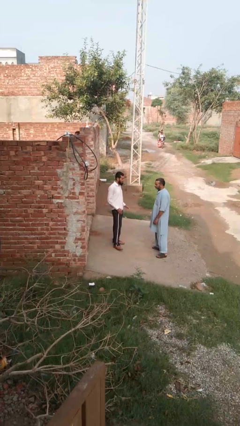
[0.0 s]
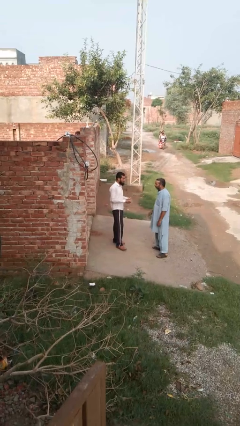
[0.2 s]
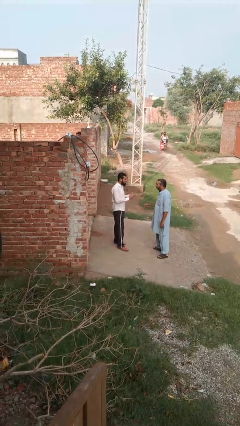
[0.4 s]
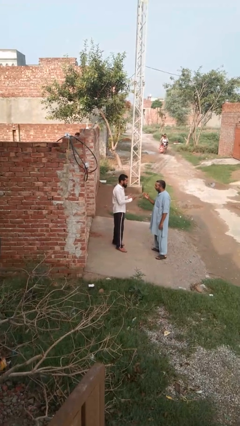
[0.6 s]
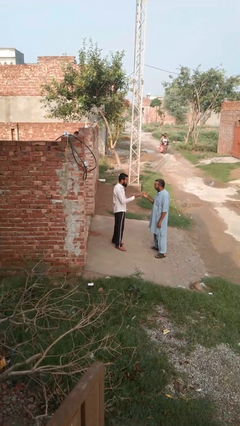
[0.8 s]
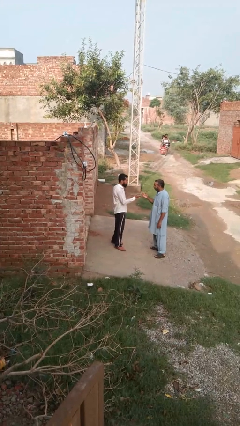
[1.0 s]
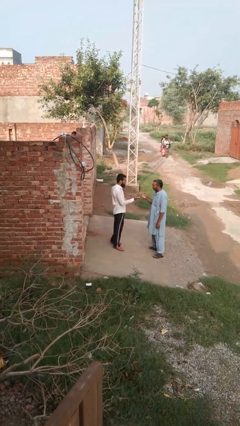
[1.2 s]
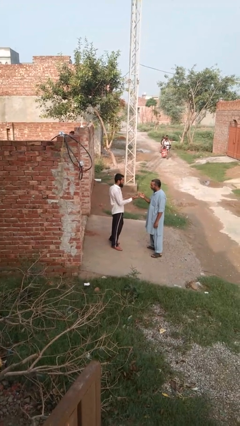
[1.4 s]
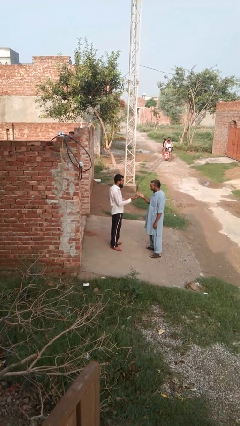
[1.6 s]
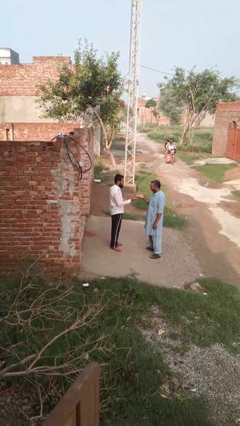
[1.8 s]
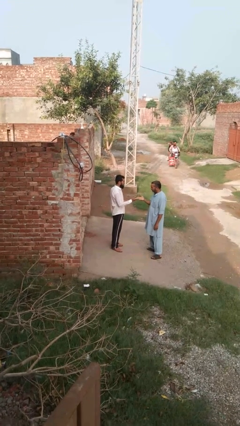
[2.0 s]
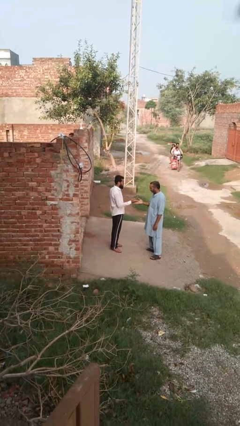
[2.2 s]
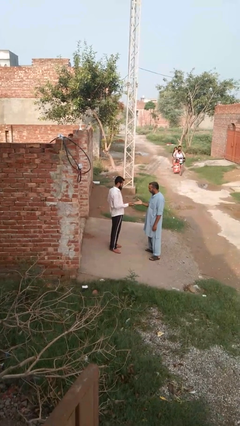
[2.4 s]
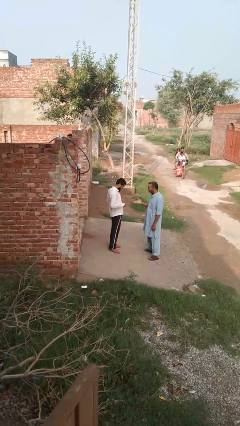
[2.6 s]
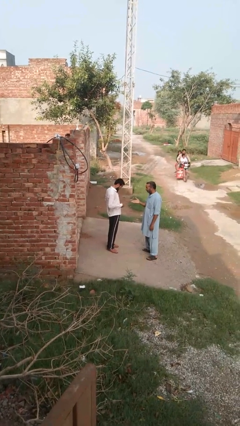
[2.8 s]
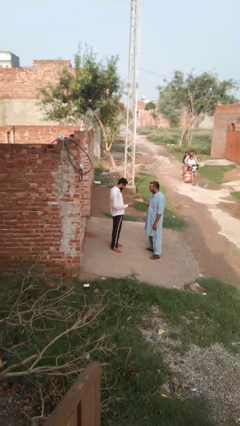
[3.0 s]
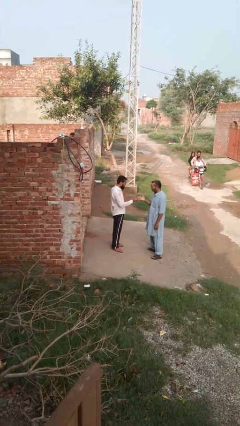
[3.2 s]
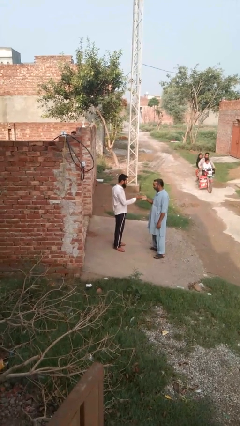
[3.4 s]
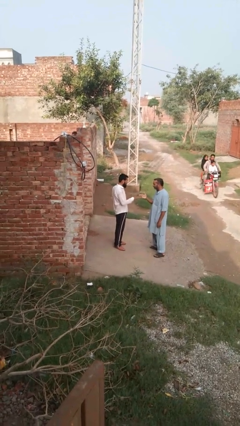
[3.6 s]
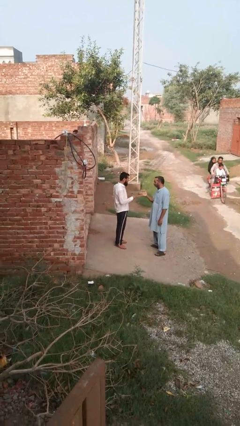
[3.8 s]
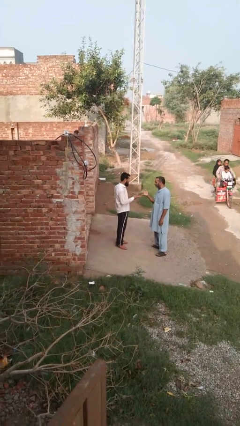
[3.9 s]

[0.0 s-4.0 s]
person talks to person

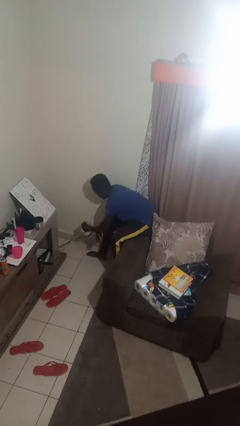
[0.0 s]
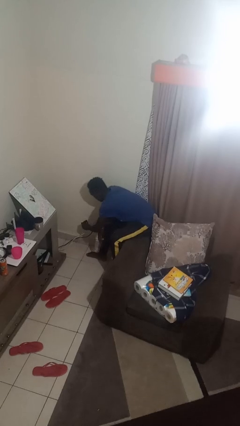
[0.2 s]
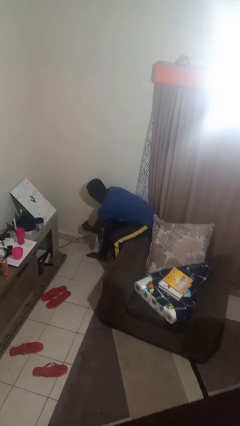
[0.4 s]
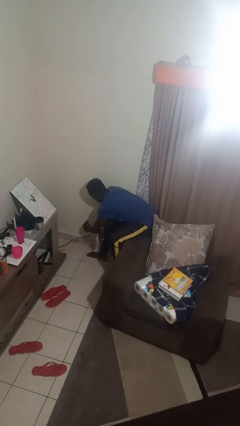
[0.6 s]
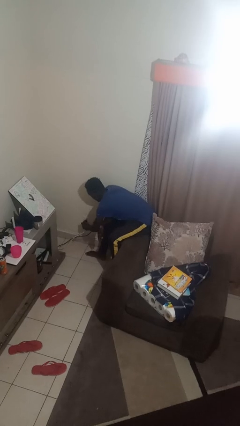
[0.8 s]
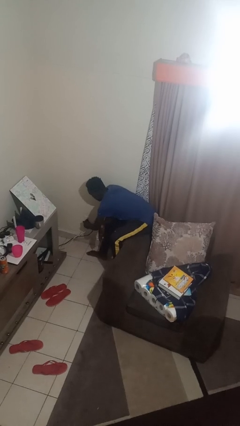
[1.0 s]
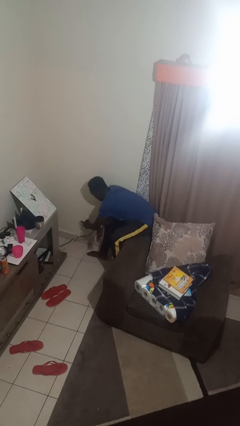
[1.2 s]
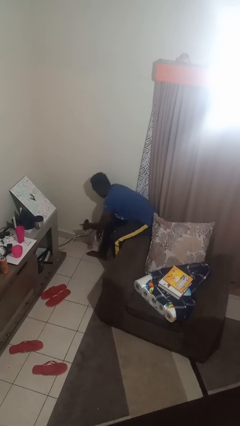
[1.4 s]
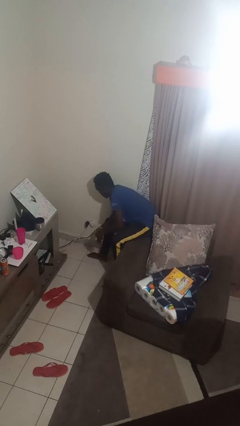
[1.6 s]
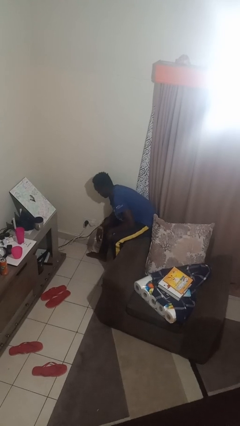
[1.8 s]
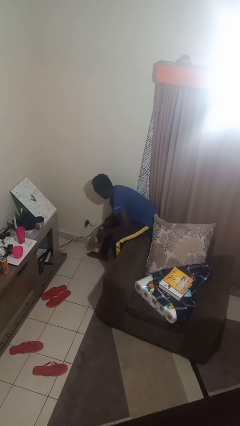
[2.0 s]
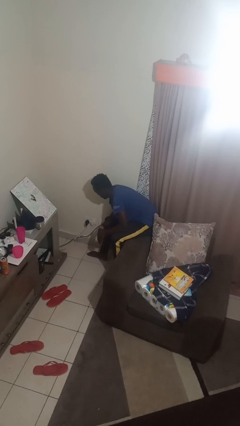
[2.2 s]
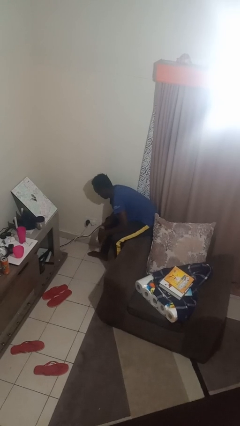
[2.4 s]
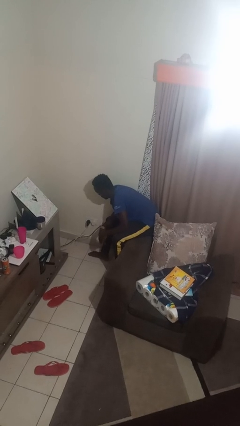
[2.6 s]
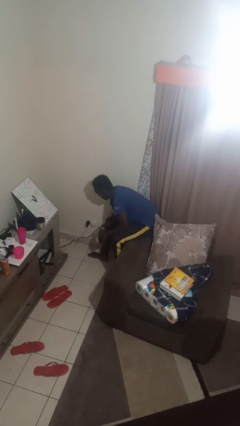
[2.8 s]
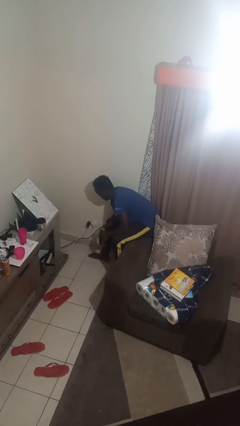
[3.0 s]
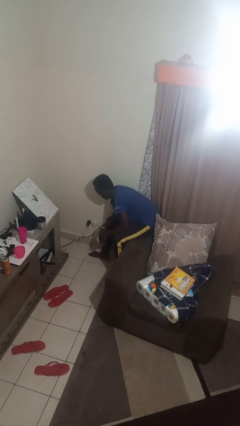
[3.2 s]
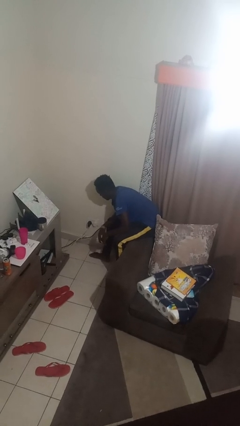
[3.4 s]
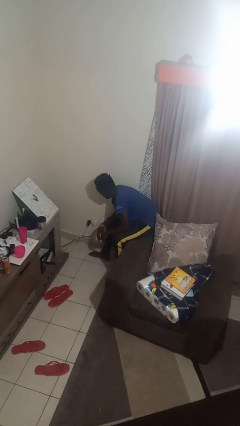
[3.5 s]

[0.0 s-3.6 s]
person plugs into electrical socket

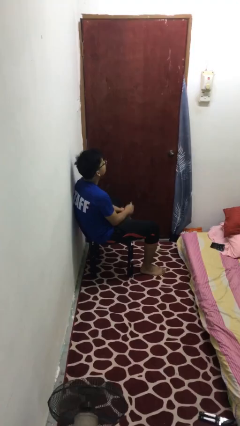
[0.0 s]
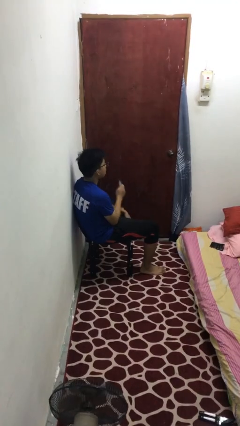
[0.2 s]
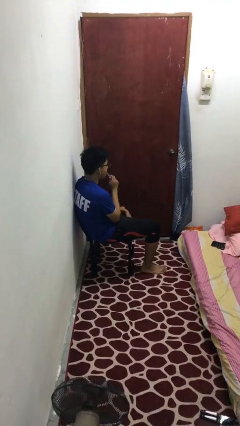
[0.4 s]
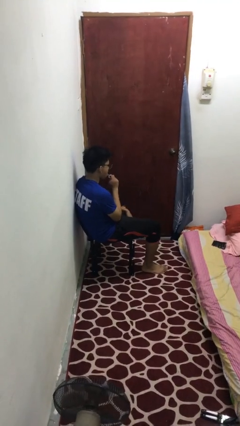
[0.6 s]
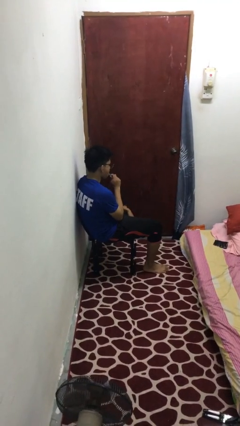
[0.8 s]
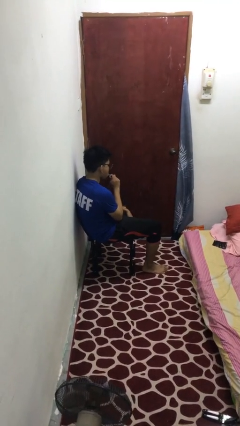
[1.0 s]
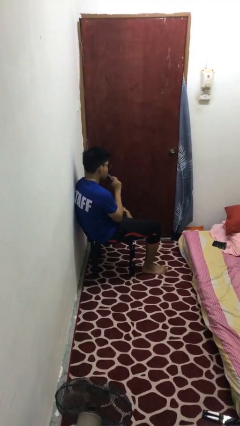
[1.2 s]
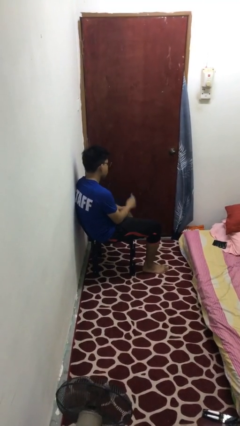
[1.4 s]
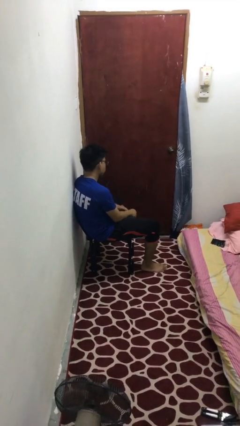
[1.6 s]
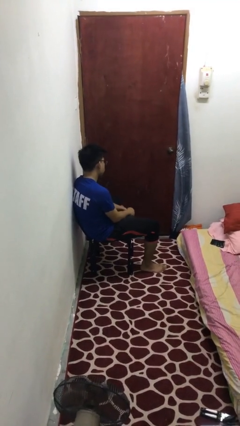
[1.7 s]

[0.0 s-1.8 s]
person vapes

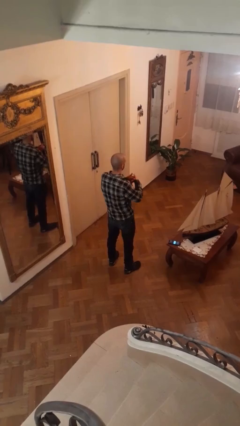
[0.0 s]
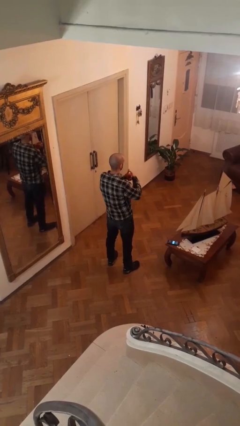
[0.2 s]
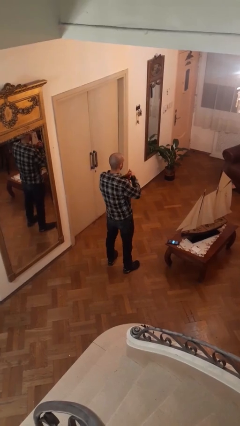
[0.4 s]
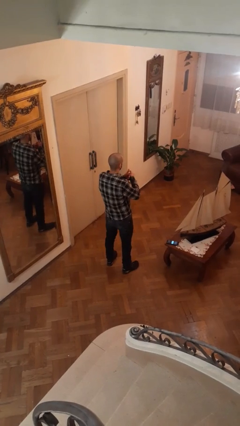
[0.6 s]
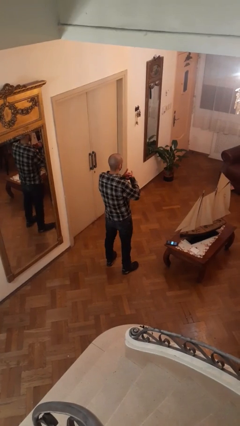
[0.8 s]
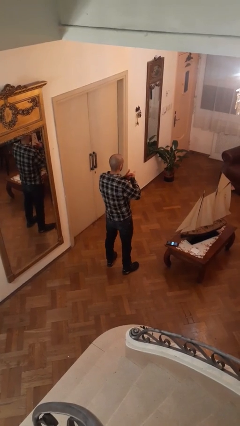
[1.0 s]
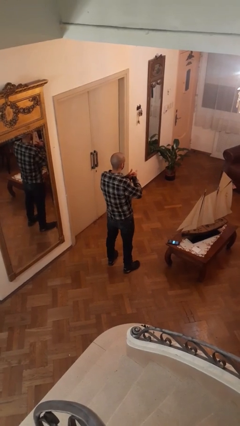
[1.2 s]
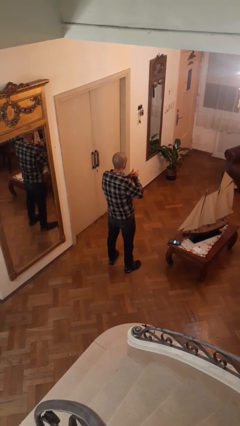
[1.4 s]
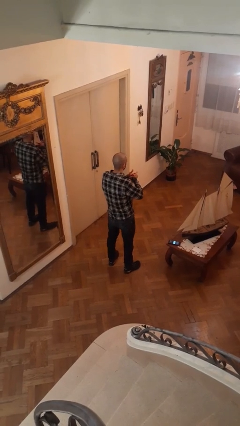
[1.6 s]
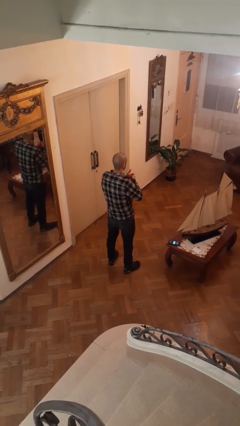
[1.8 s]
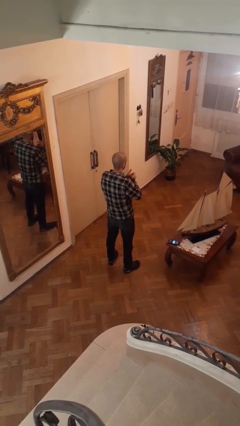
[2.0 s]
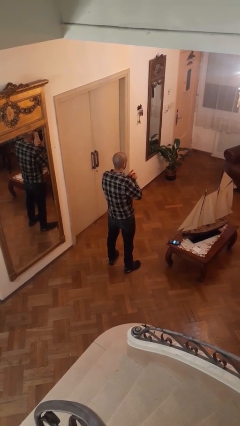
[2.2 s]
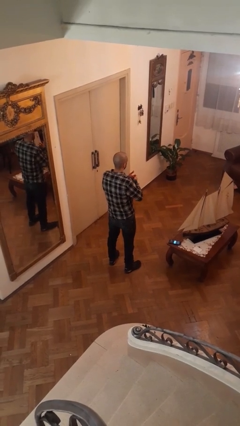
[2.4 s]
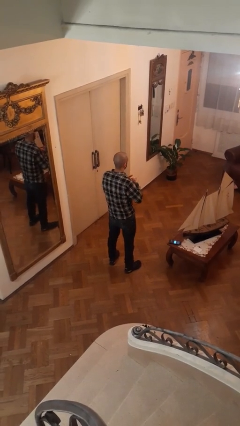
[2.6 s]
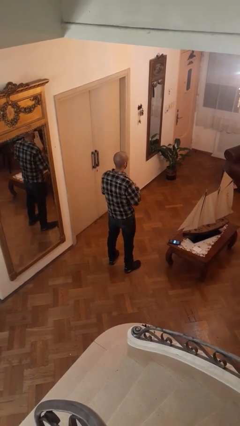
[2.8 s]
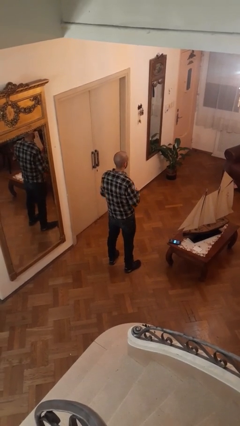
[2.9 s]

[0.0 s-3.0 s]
person cracks knuckles

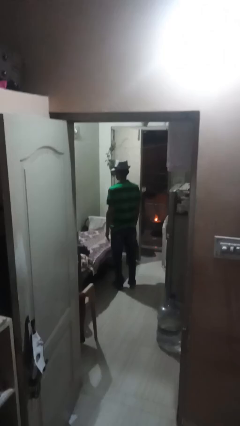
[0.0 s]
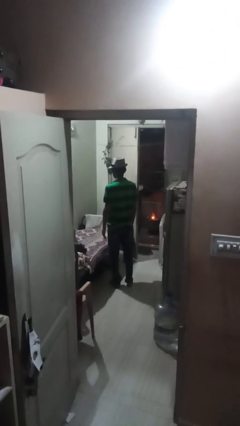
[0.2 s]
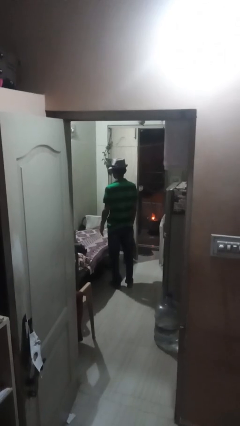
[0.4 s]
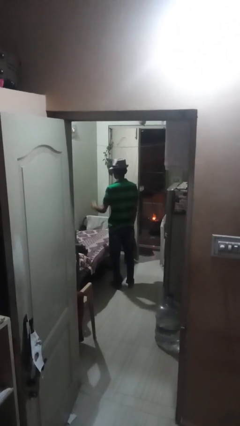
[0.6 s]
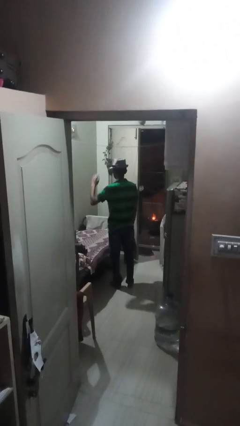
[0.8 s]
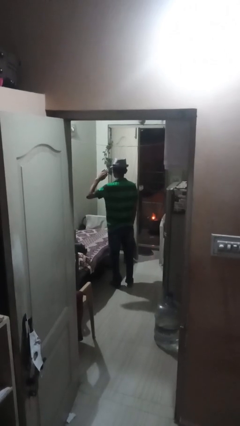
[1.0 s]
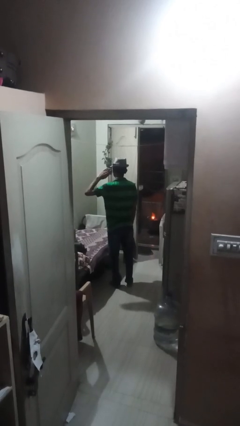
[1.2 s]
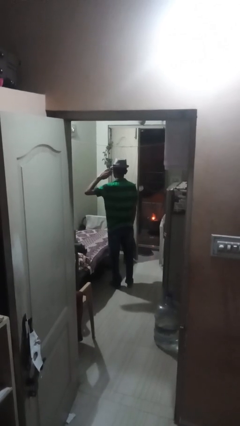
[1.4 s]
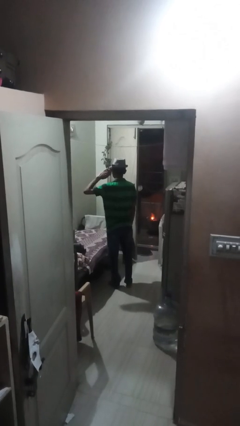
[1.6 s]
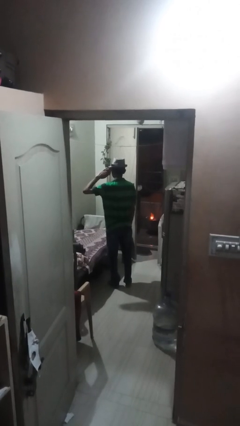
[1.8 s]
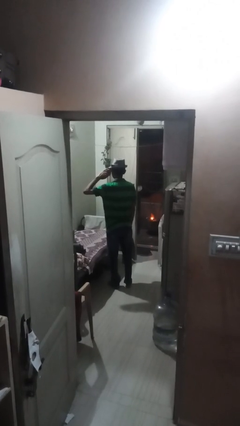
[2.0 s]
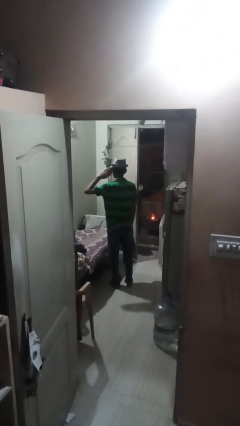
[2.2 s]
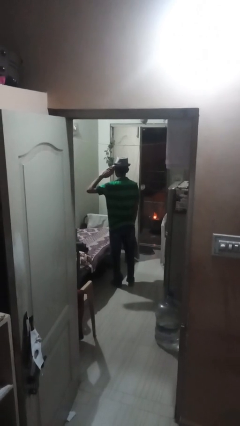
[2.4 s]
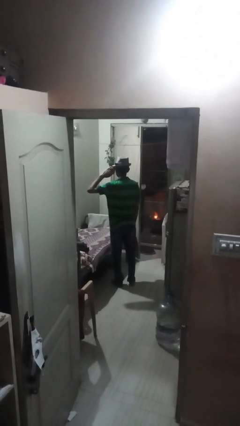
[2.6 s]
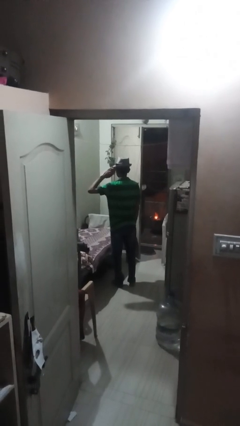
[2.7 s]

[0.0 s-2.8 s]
person salutes

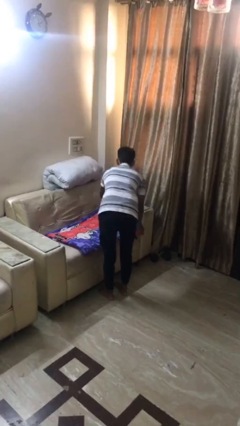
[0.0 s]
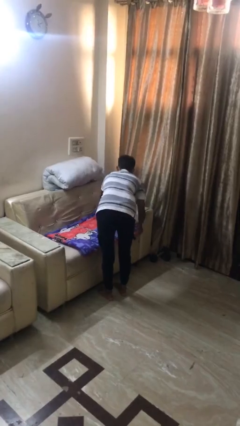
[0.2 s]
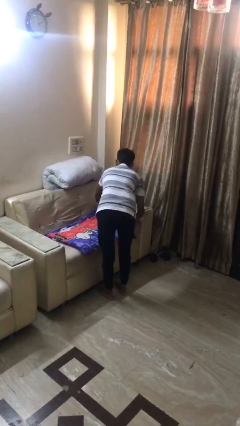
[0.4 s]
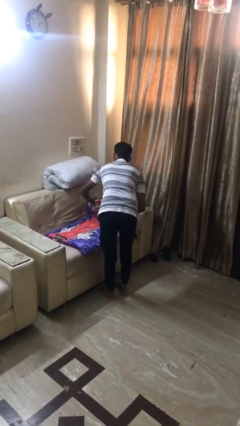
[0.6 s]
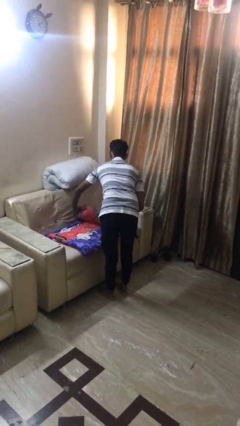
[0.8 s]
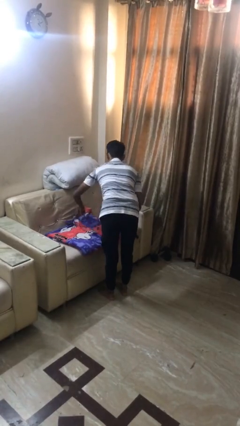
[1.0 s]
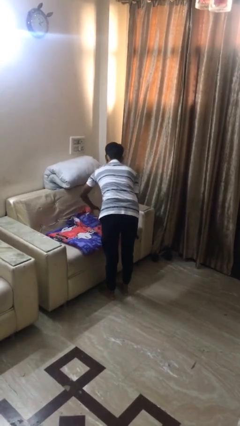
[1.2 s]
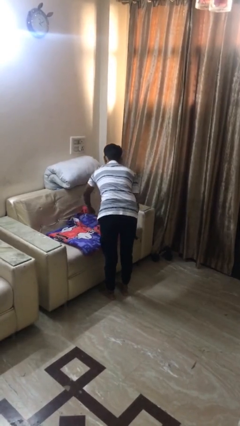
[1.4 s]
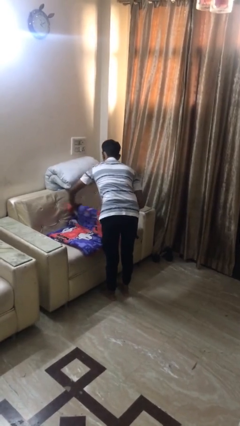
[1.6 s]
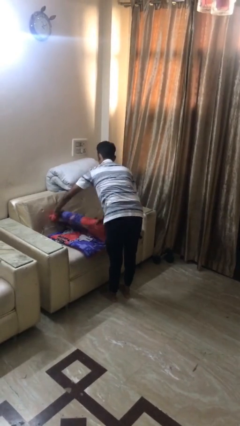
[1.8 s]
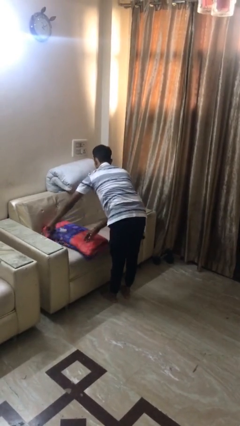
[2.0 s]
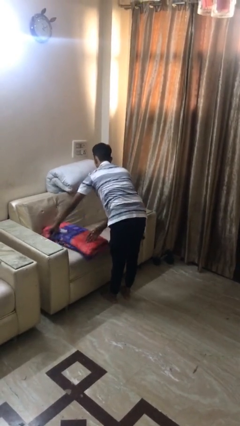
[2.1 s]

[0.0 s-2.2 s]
person folds blanket

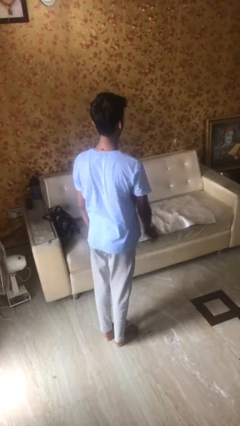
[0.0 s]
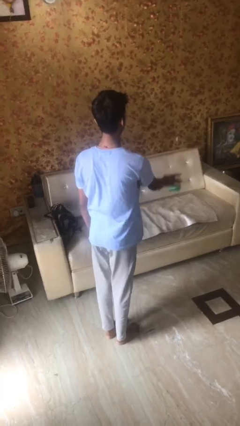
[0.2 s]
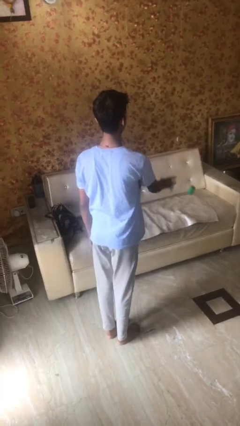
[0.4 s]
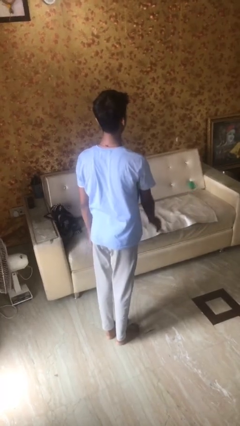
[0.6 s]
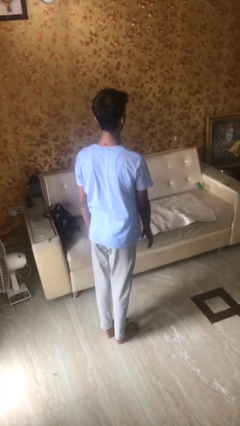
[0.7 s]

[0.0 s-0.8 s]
person throws object on bed
